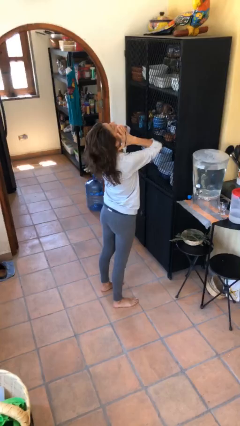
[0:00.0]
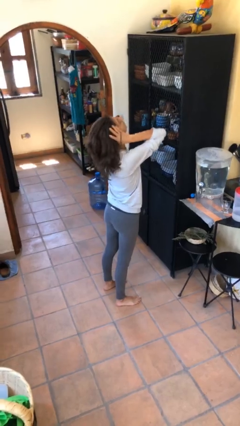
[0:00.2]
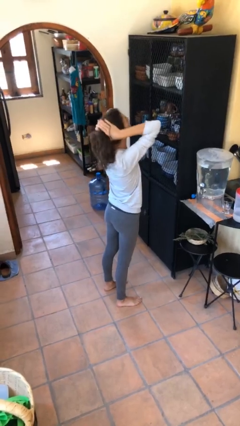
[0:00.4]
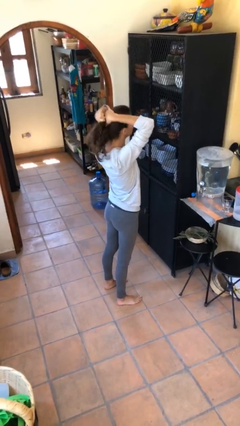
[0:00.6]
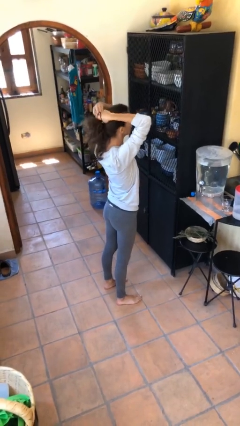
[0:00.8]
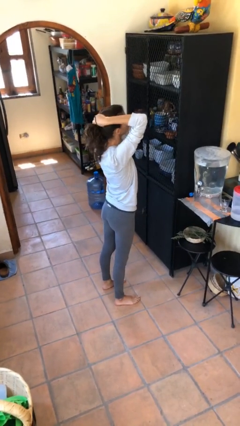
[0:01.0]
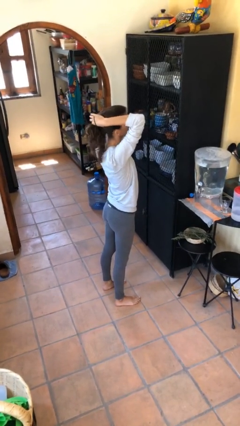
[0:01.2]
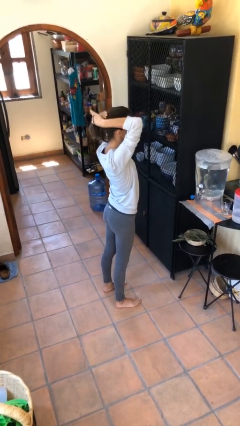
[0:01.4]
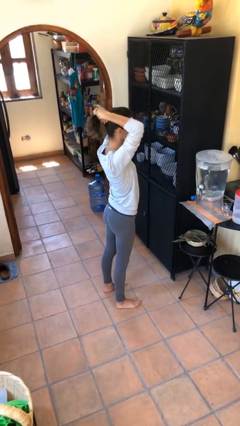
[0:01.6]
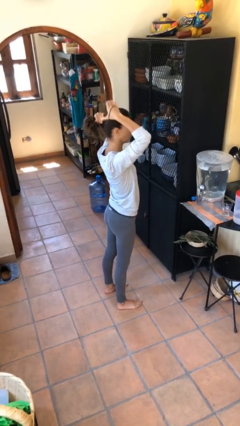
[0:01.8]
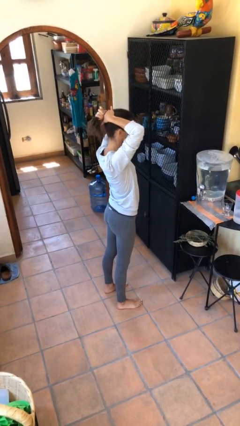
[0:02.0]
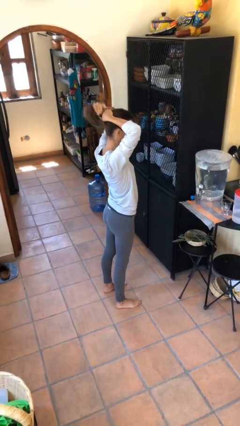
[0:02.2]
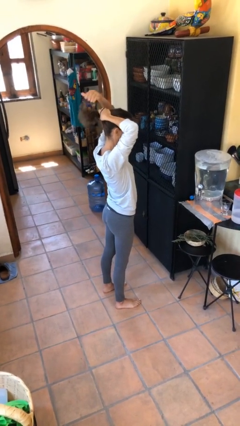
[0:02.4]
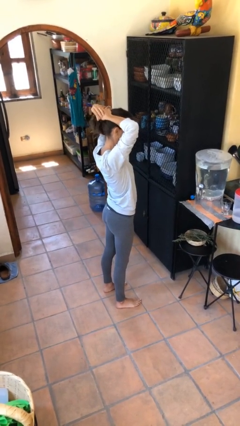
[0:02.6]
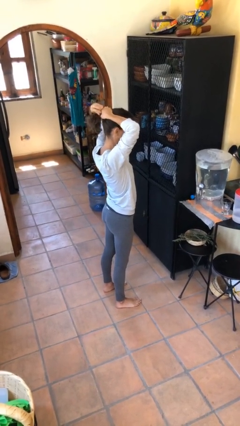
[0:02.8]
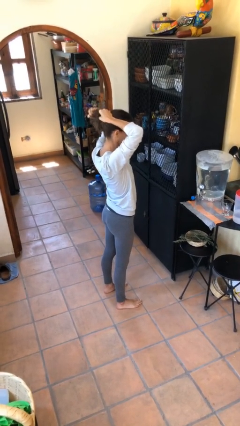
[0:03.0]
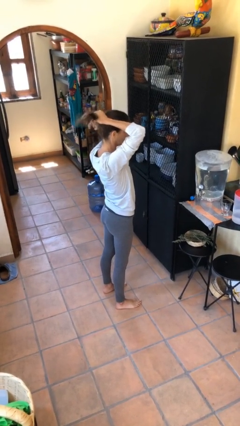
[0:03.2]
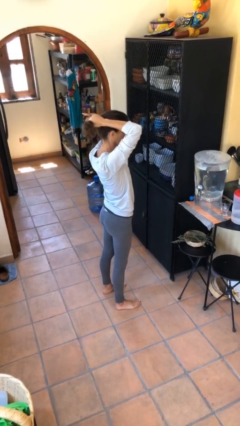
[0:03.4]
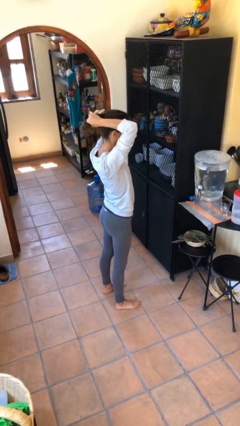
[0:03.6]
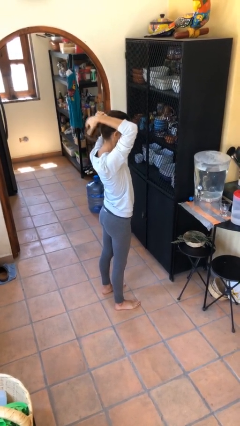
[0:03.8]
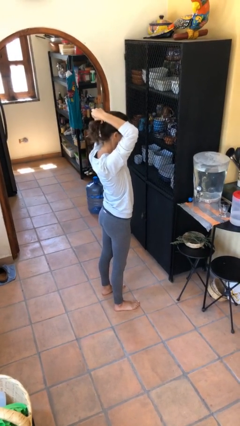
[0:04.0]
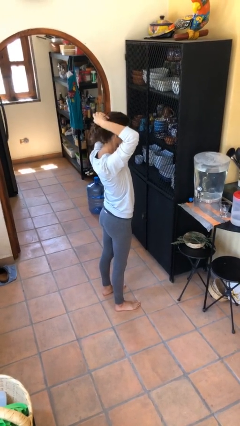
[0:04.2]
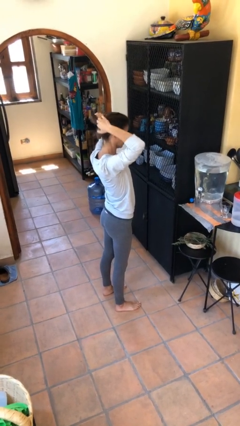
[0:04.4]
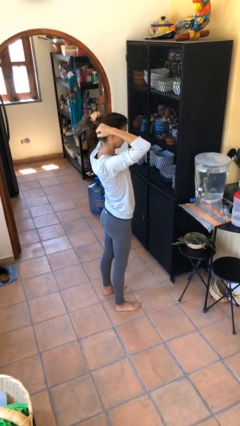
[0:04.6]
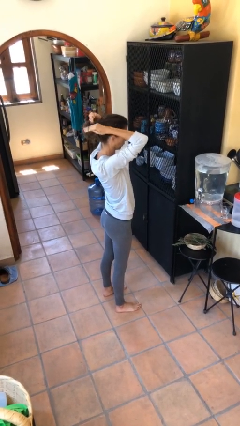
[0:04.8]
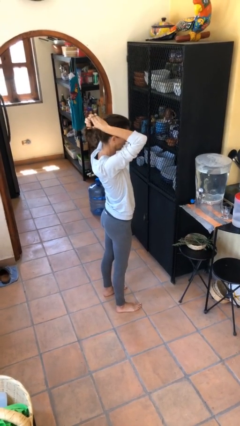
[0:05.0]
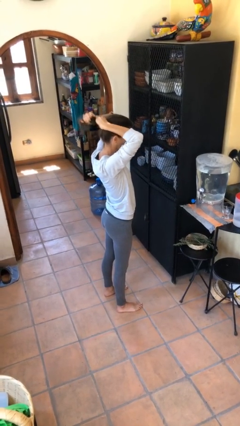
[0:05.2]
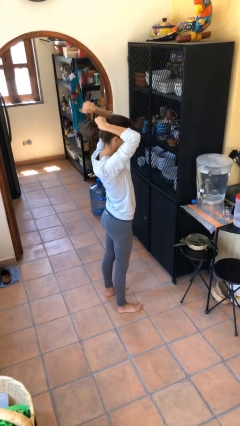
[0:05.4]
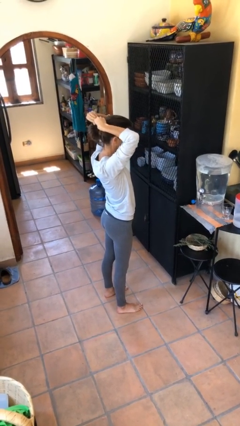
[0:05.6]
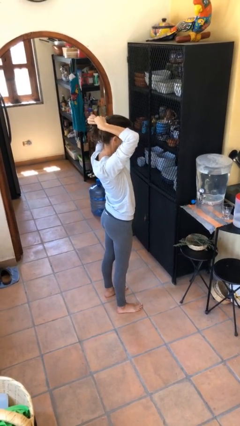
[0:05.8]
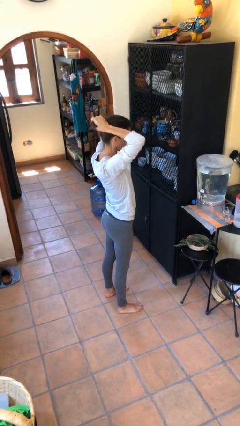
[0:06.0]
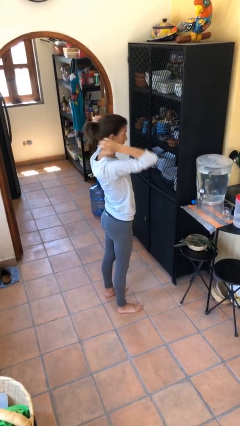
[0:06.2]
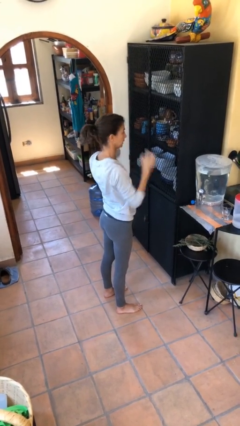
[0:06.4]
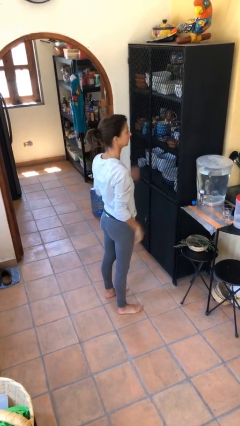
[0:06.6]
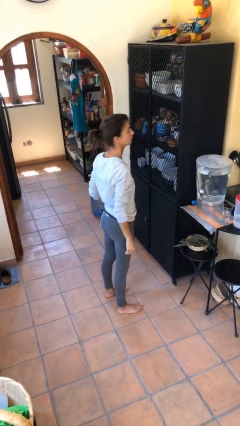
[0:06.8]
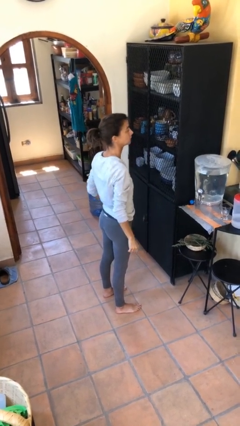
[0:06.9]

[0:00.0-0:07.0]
person puts hair in ponytail

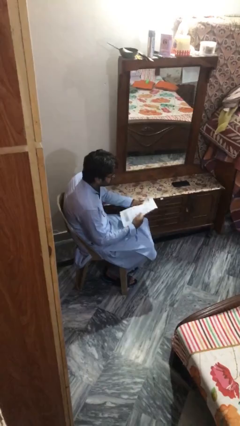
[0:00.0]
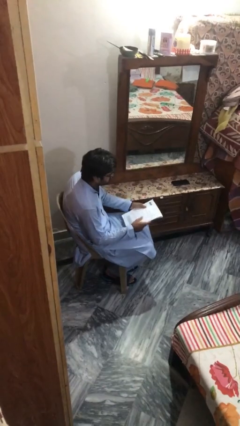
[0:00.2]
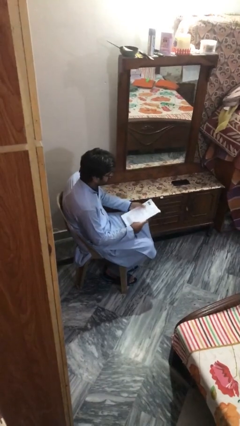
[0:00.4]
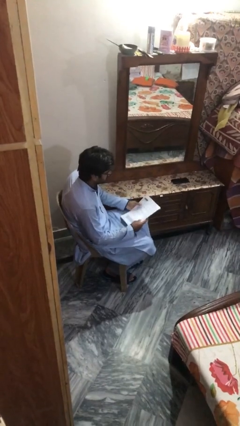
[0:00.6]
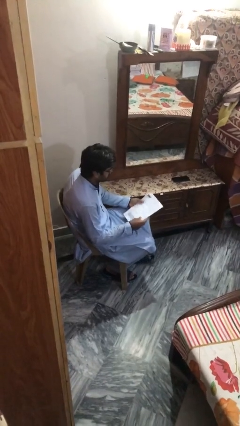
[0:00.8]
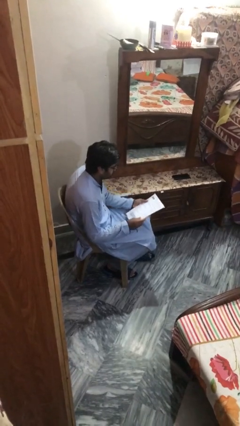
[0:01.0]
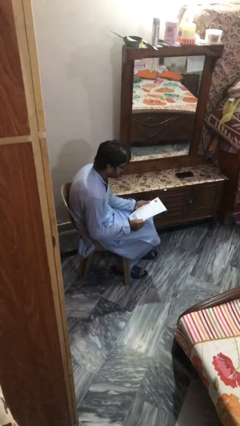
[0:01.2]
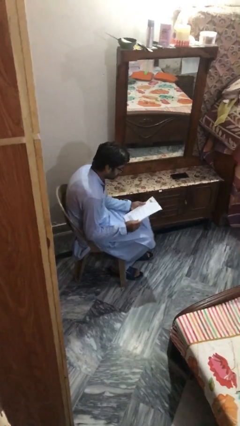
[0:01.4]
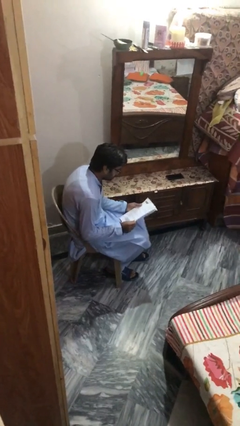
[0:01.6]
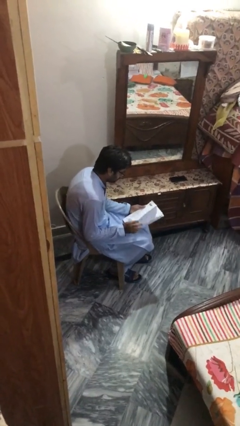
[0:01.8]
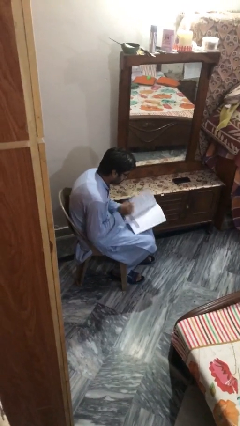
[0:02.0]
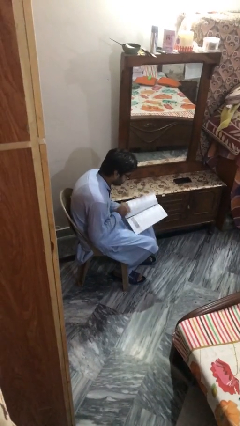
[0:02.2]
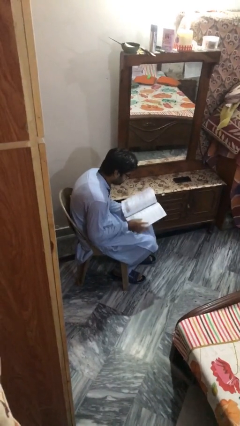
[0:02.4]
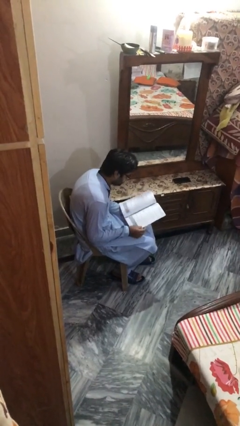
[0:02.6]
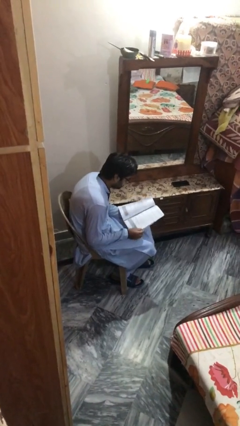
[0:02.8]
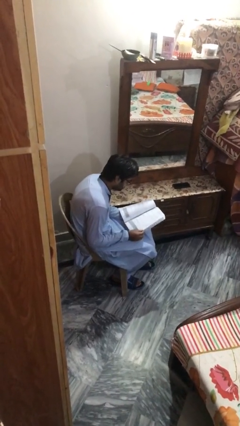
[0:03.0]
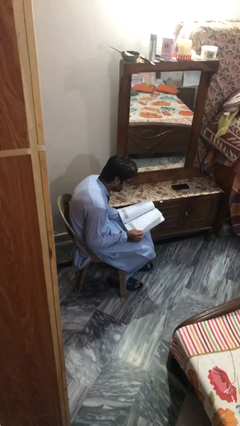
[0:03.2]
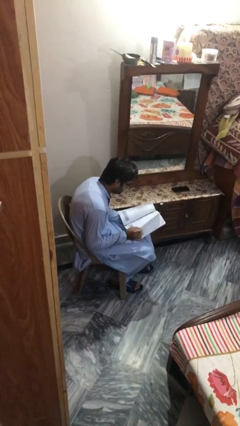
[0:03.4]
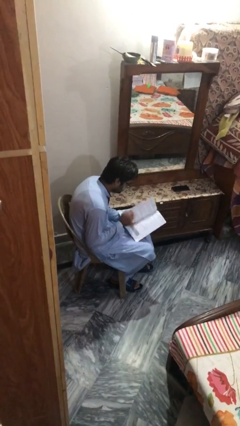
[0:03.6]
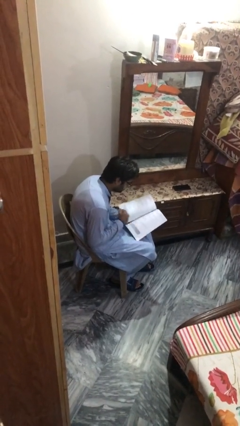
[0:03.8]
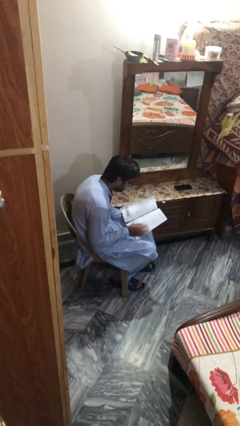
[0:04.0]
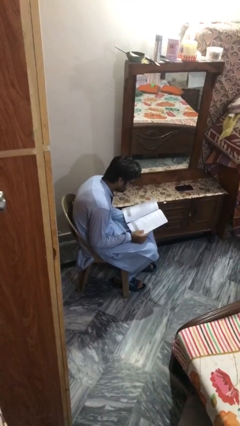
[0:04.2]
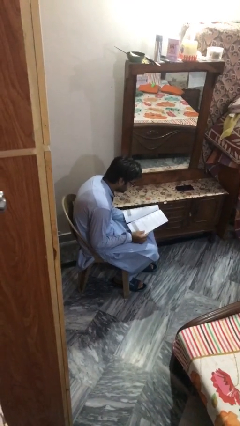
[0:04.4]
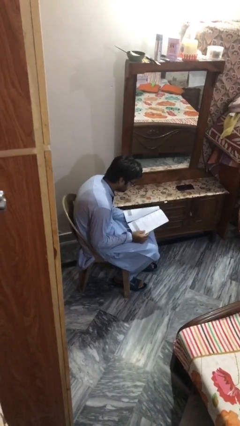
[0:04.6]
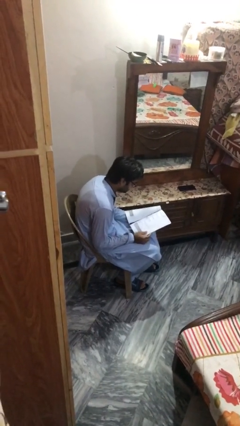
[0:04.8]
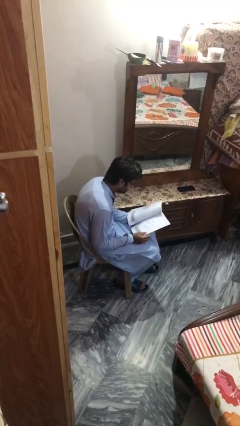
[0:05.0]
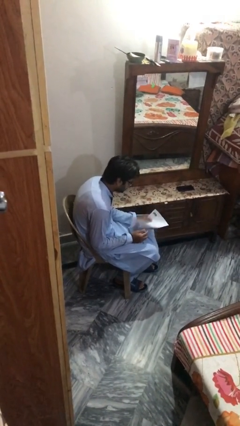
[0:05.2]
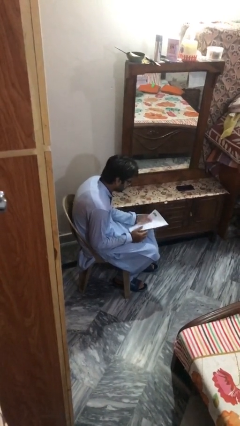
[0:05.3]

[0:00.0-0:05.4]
person reads document

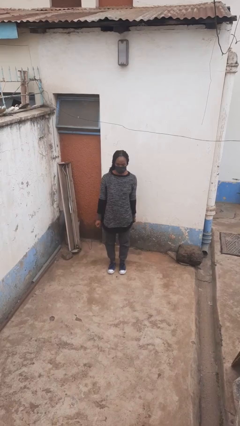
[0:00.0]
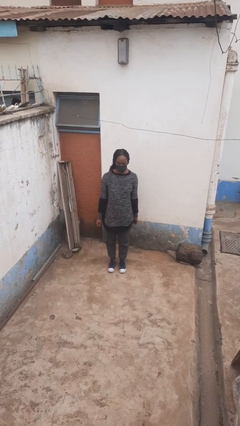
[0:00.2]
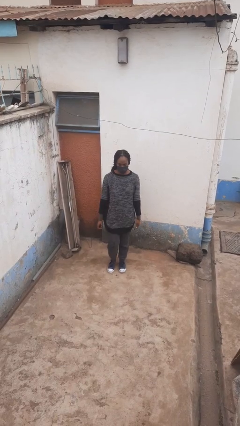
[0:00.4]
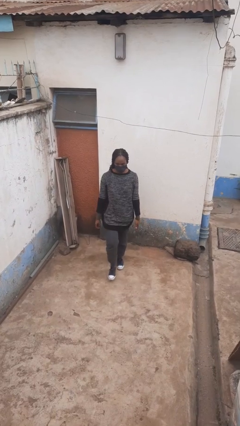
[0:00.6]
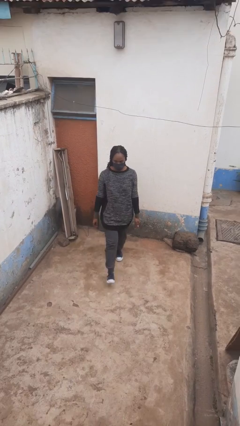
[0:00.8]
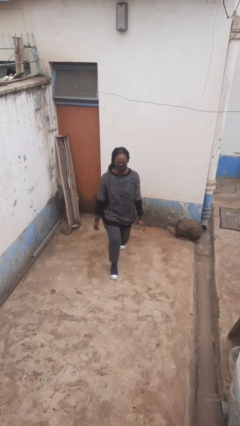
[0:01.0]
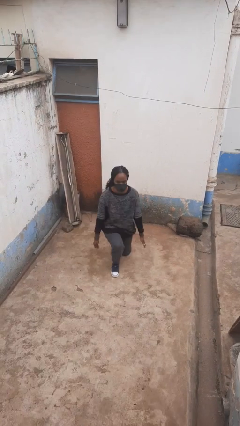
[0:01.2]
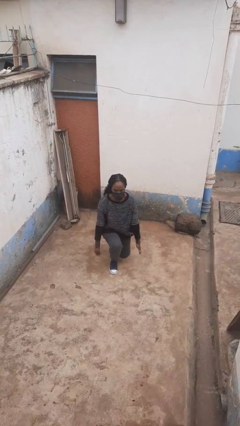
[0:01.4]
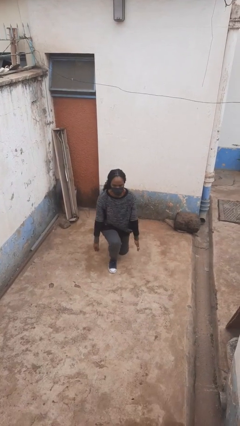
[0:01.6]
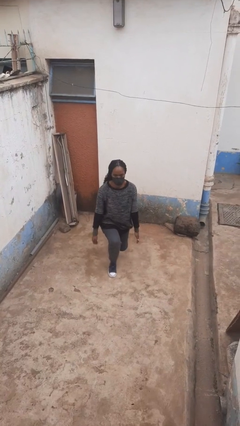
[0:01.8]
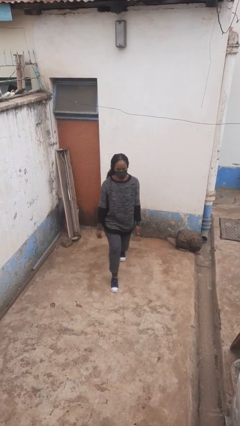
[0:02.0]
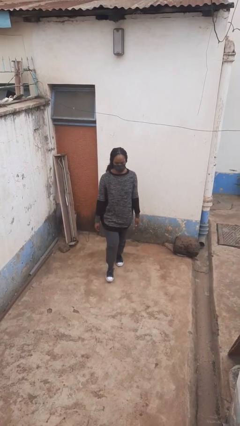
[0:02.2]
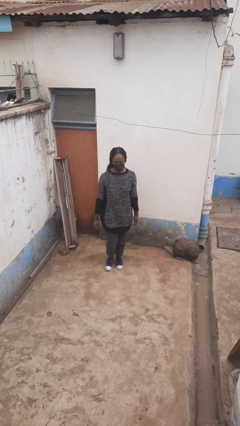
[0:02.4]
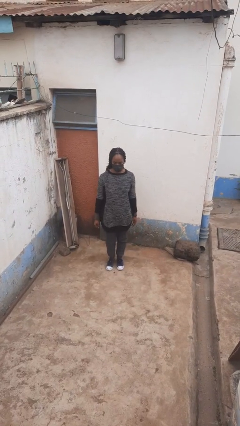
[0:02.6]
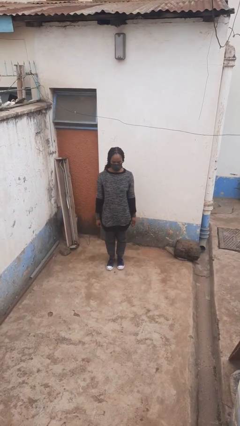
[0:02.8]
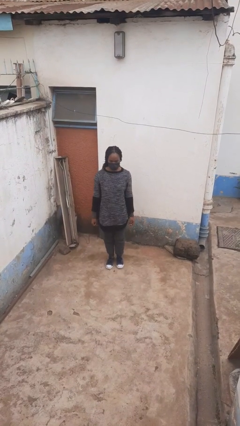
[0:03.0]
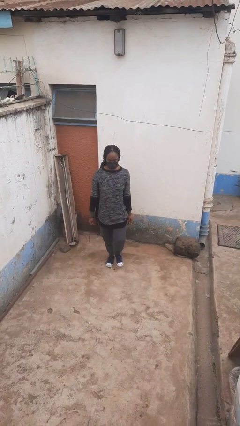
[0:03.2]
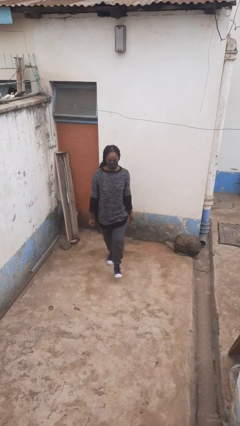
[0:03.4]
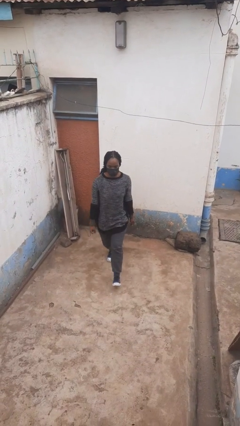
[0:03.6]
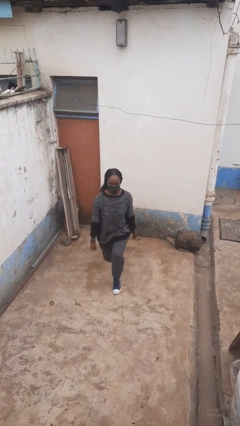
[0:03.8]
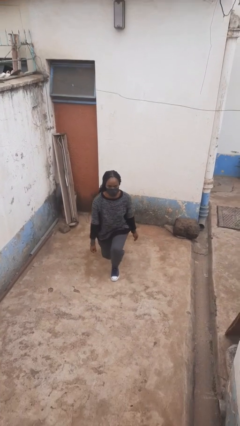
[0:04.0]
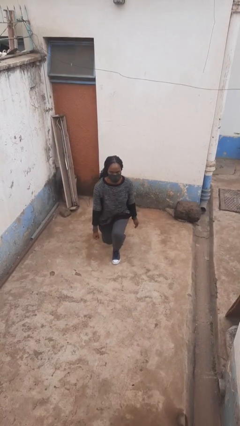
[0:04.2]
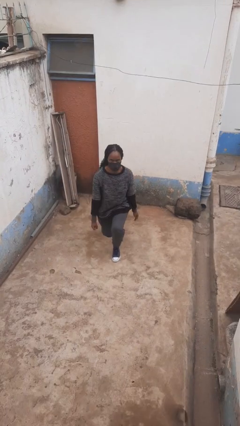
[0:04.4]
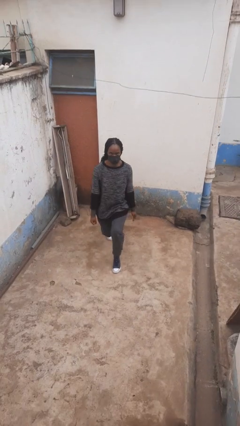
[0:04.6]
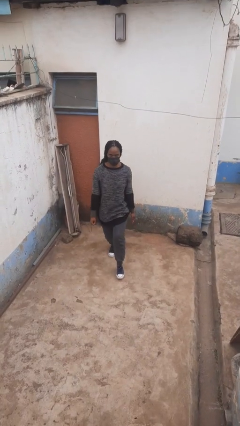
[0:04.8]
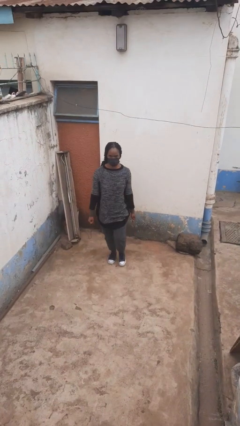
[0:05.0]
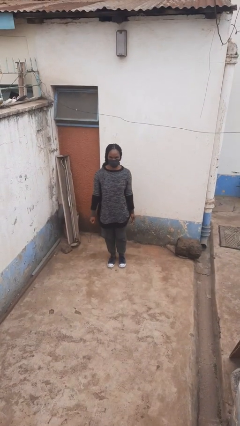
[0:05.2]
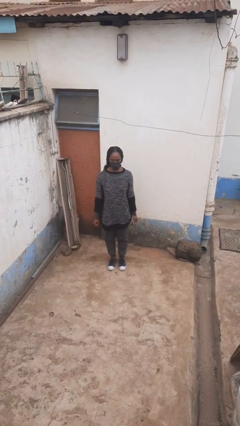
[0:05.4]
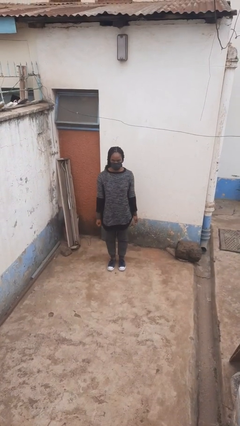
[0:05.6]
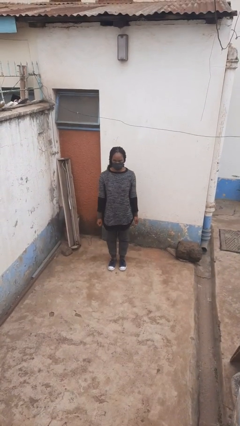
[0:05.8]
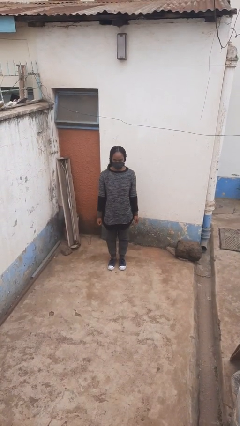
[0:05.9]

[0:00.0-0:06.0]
person exercises with lunges
